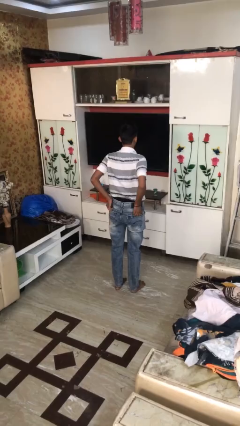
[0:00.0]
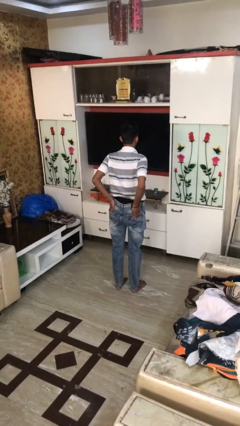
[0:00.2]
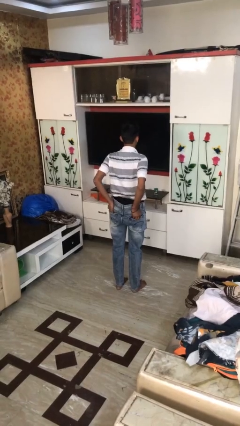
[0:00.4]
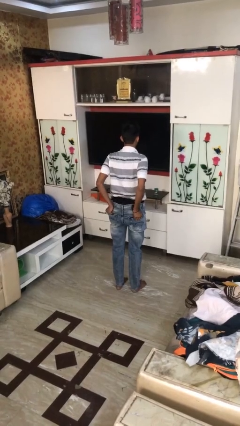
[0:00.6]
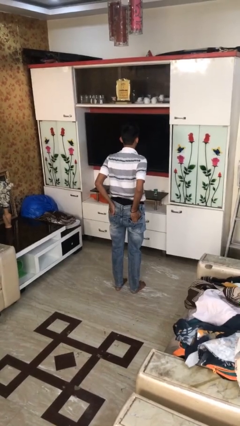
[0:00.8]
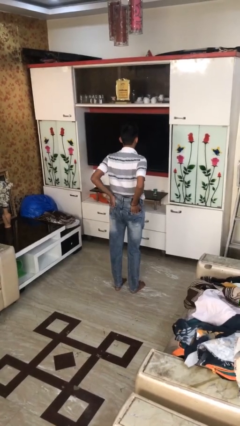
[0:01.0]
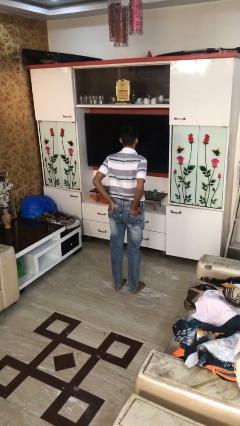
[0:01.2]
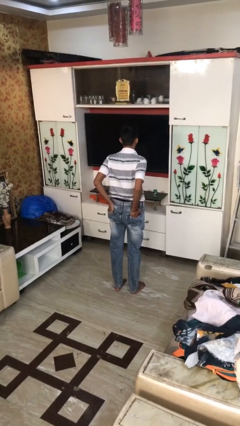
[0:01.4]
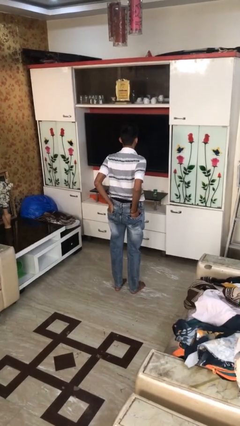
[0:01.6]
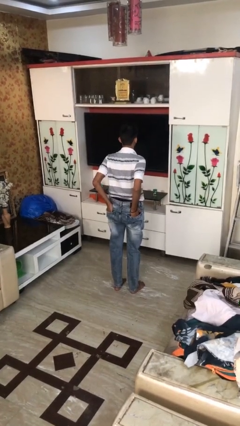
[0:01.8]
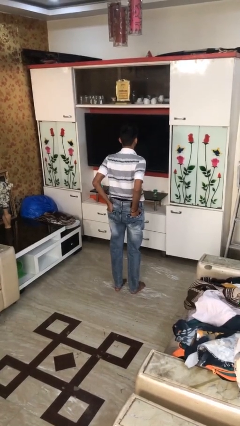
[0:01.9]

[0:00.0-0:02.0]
person puts hands in back pockets

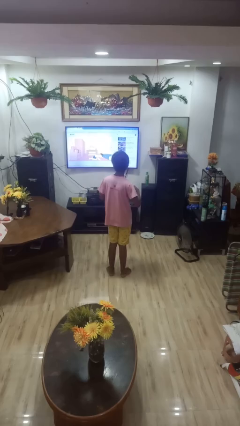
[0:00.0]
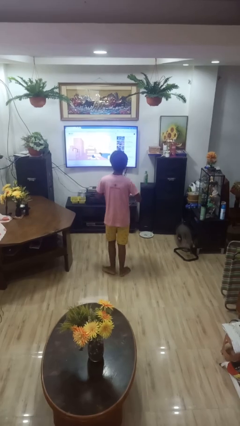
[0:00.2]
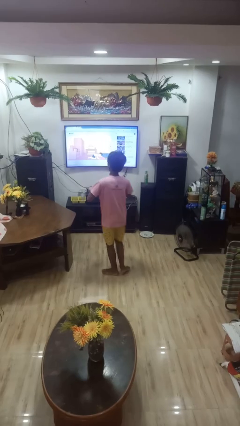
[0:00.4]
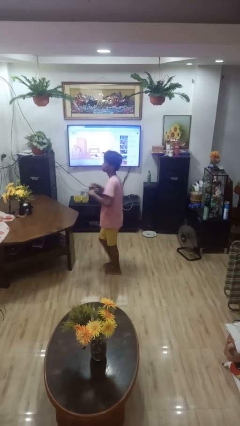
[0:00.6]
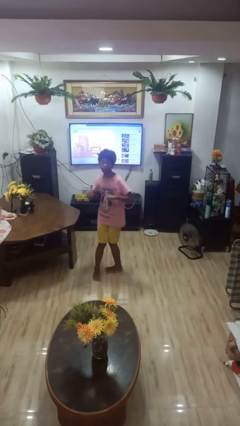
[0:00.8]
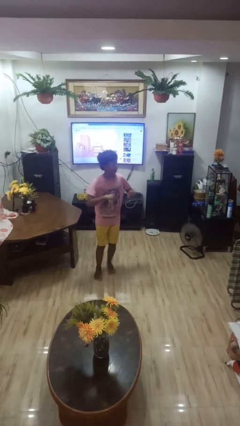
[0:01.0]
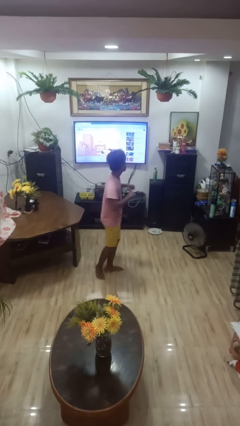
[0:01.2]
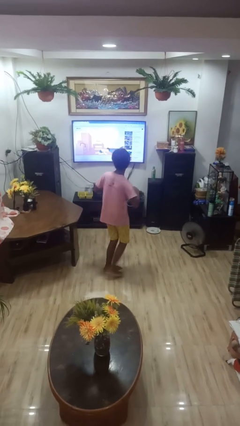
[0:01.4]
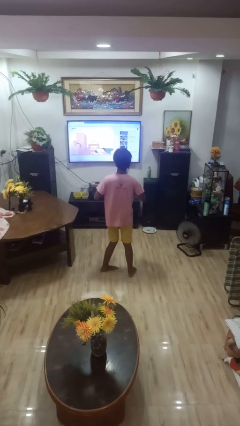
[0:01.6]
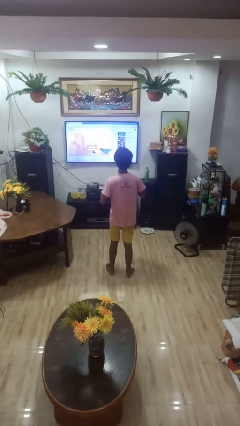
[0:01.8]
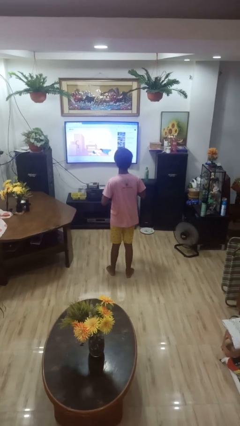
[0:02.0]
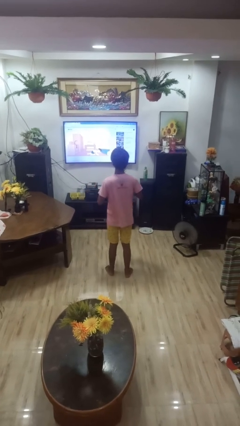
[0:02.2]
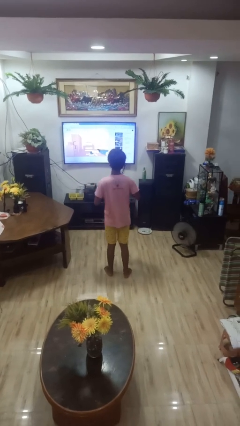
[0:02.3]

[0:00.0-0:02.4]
person twirls

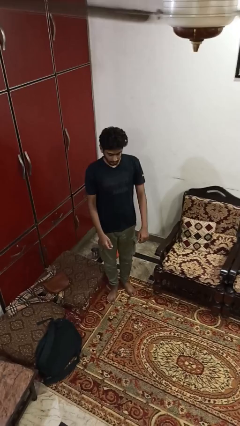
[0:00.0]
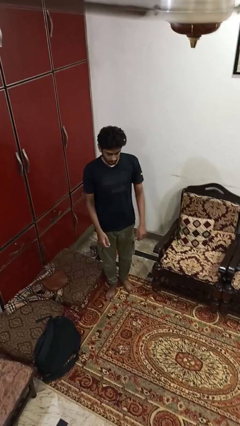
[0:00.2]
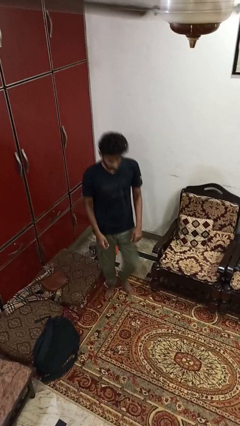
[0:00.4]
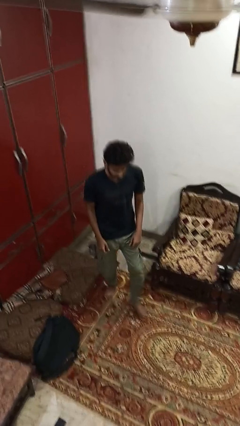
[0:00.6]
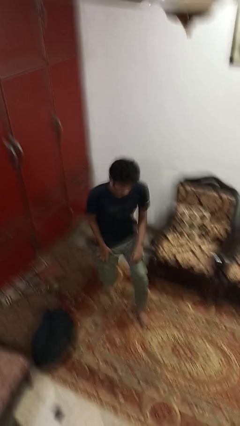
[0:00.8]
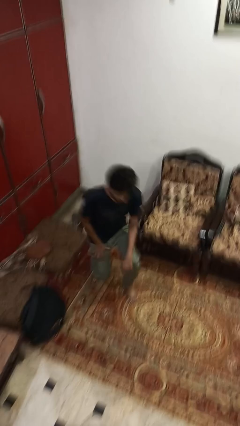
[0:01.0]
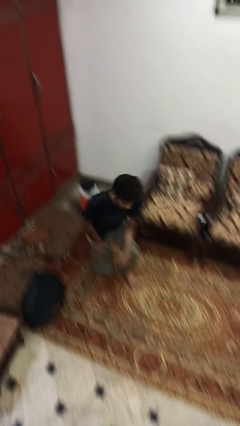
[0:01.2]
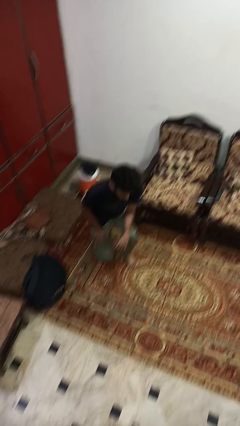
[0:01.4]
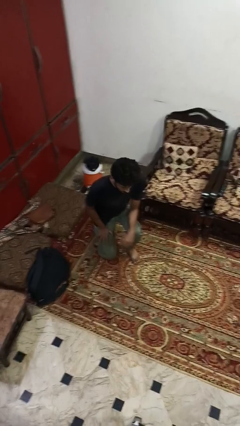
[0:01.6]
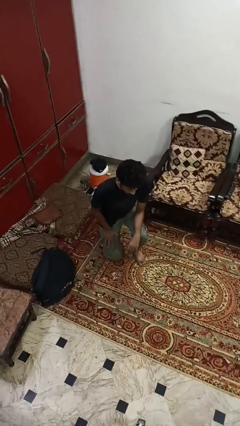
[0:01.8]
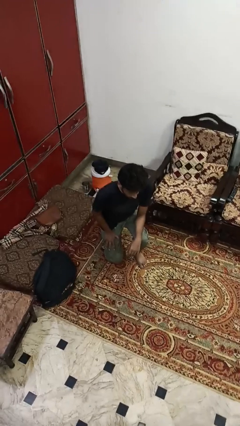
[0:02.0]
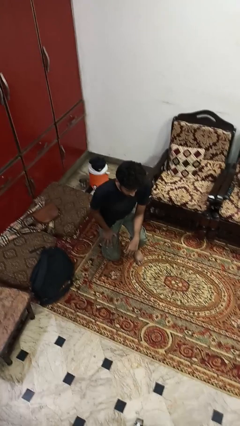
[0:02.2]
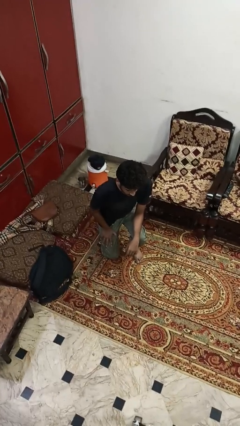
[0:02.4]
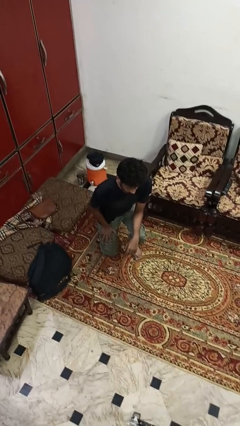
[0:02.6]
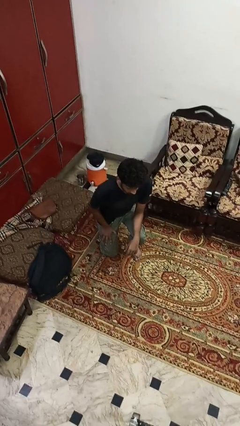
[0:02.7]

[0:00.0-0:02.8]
person kneels

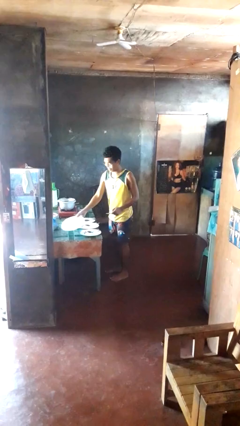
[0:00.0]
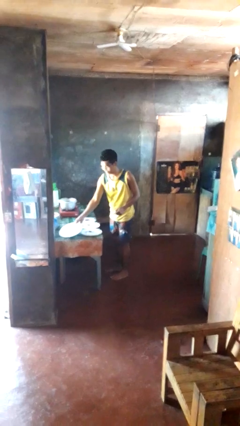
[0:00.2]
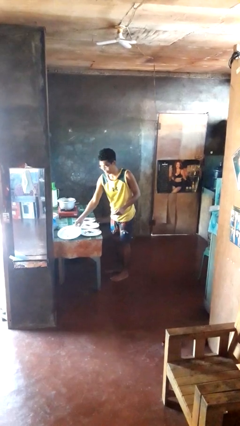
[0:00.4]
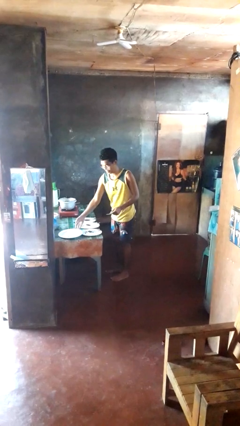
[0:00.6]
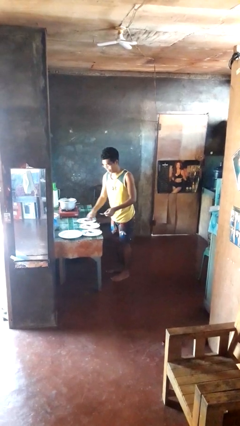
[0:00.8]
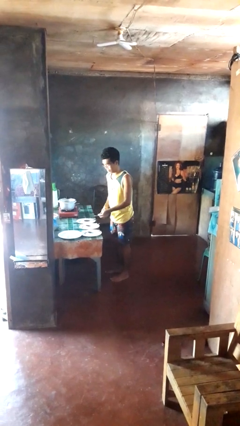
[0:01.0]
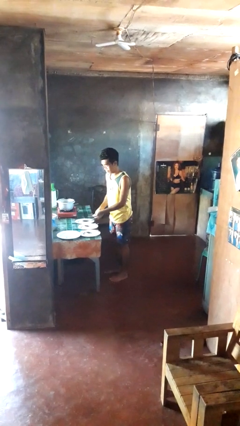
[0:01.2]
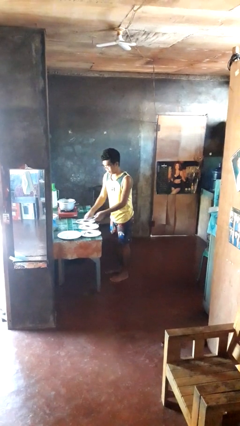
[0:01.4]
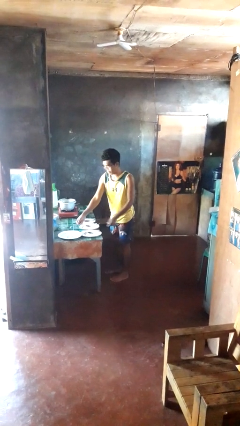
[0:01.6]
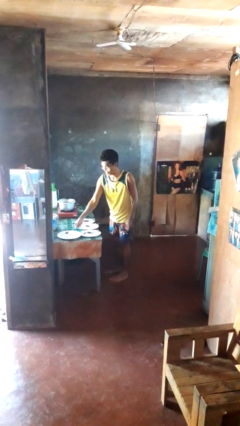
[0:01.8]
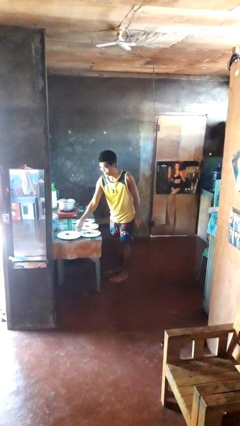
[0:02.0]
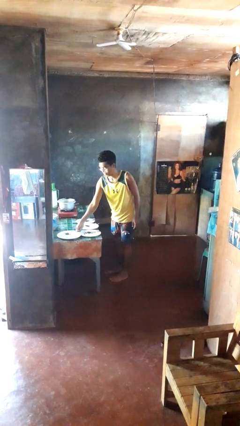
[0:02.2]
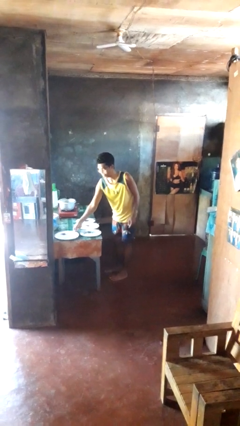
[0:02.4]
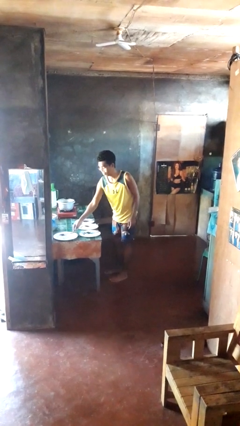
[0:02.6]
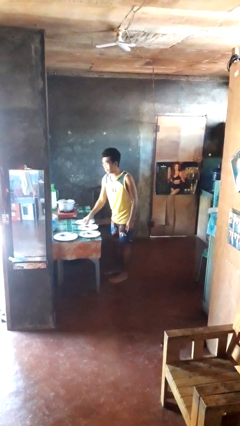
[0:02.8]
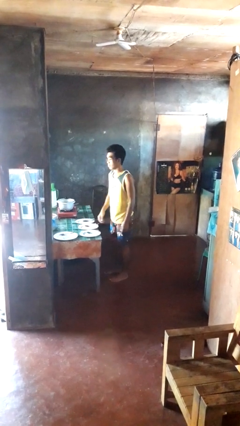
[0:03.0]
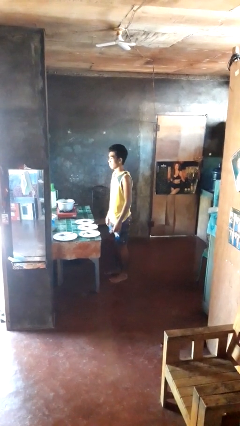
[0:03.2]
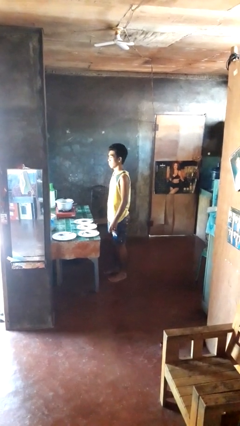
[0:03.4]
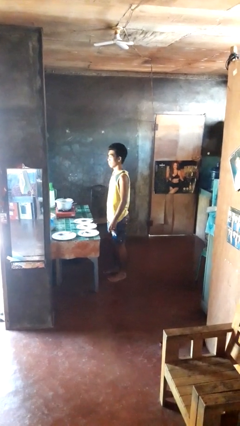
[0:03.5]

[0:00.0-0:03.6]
person sets table

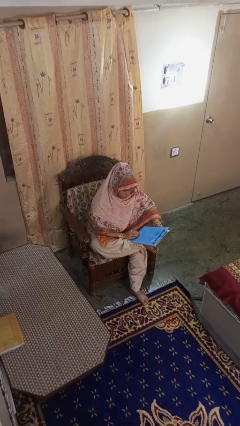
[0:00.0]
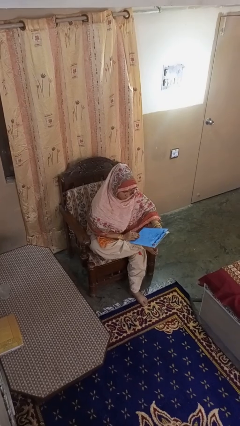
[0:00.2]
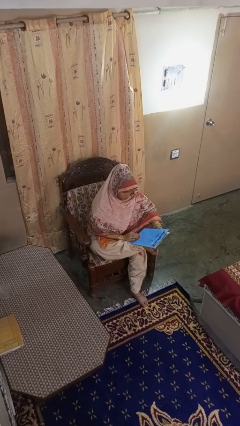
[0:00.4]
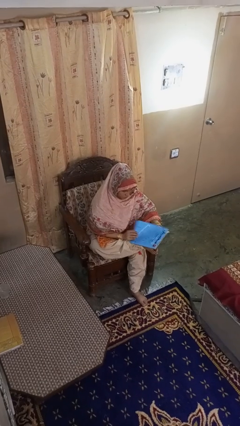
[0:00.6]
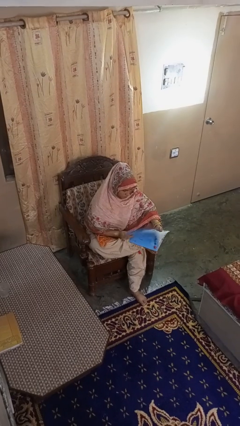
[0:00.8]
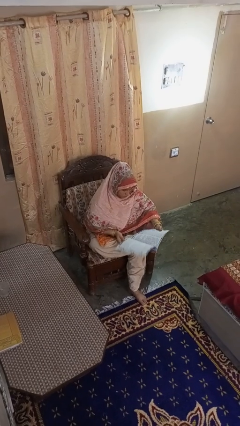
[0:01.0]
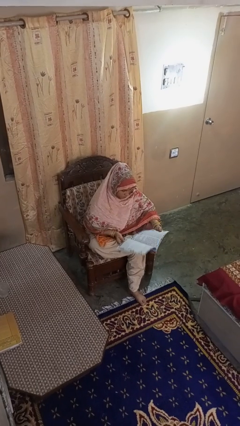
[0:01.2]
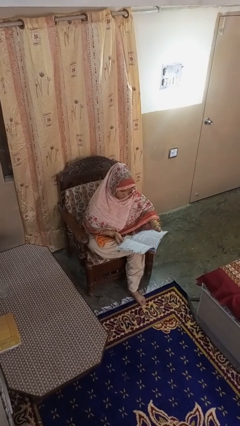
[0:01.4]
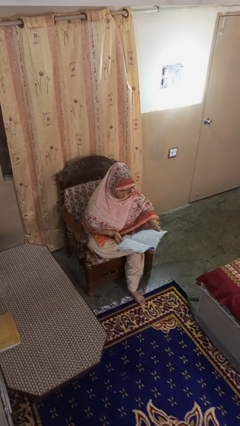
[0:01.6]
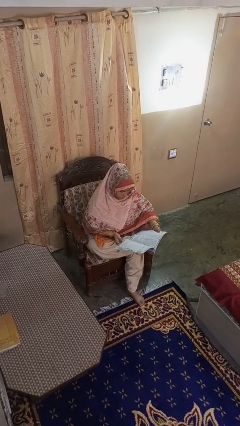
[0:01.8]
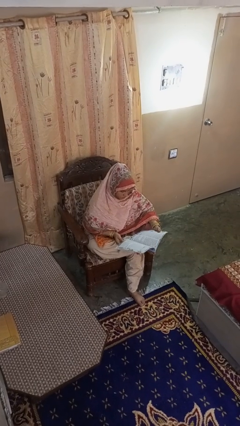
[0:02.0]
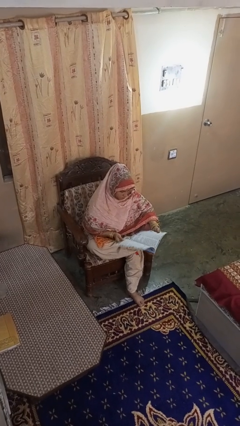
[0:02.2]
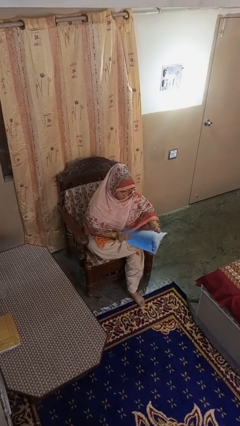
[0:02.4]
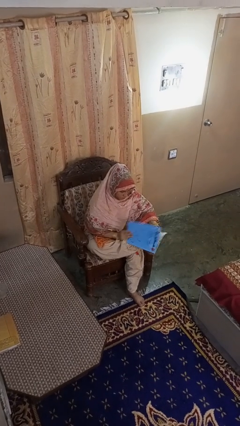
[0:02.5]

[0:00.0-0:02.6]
person reads magazine

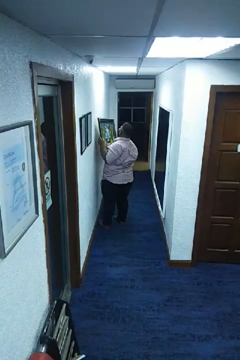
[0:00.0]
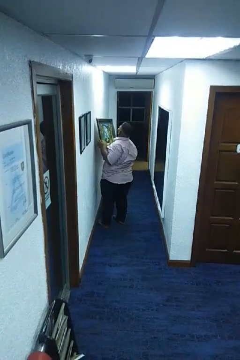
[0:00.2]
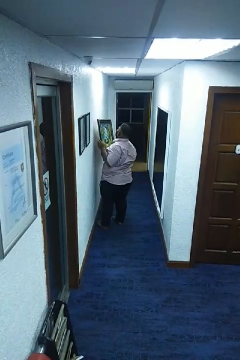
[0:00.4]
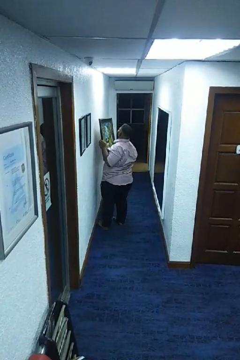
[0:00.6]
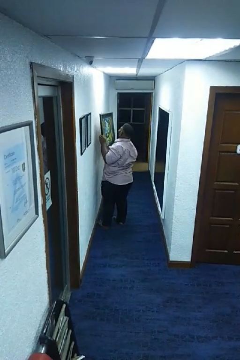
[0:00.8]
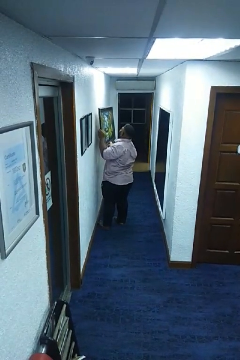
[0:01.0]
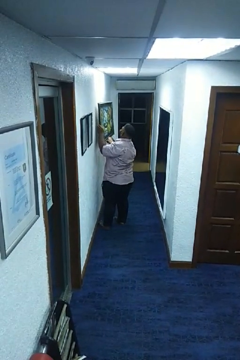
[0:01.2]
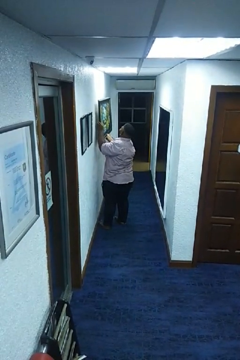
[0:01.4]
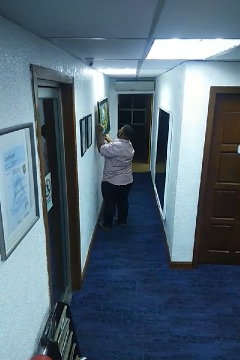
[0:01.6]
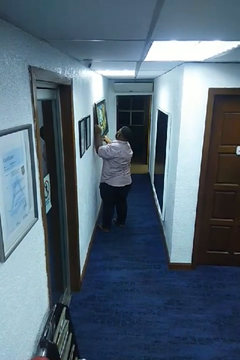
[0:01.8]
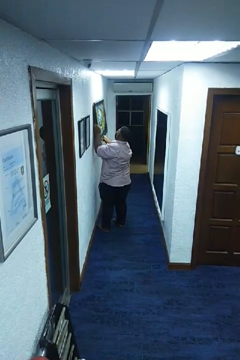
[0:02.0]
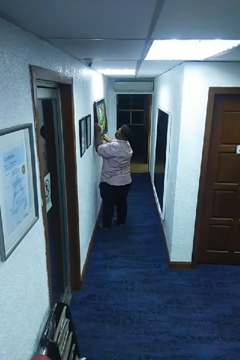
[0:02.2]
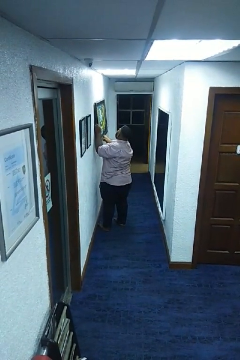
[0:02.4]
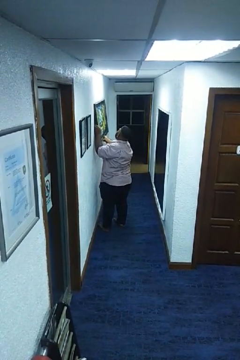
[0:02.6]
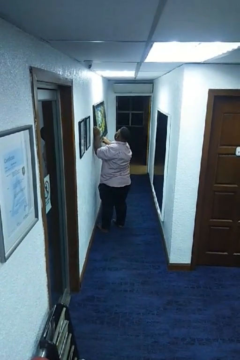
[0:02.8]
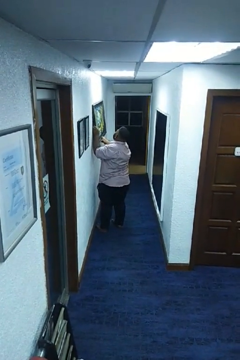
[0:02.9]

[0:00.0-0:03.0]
person puts up picture frame

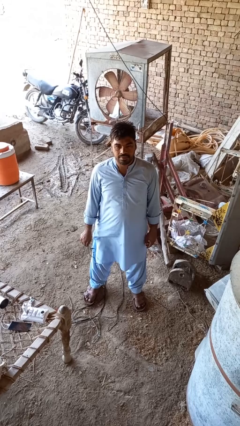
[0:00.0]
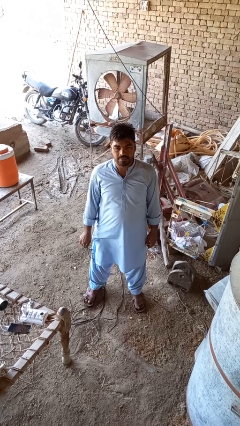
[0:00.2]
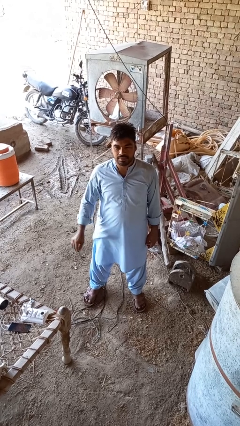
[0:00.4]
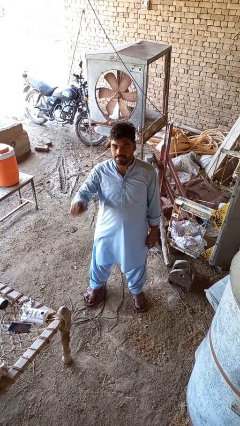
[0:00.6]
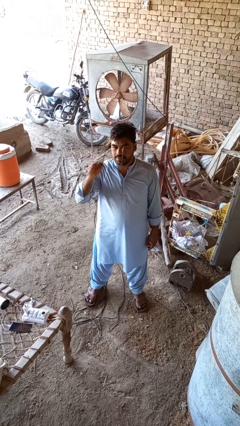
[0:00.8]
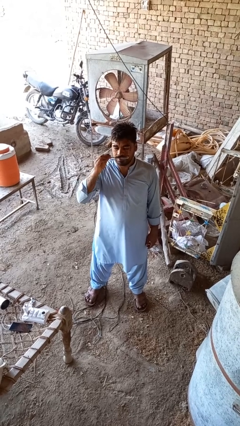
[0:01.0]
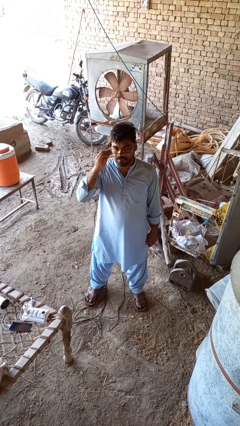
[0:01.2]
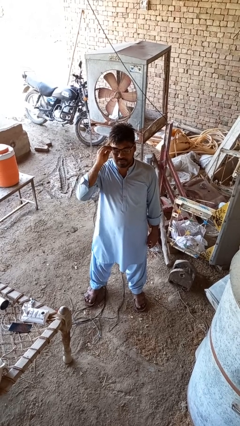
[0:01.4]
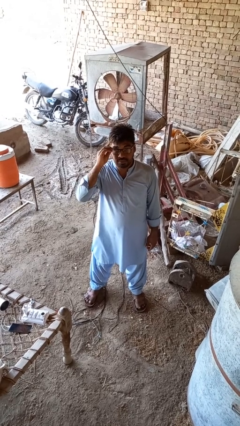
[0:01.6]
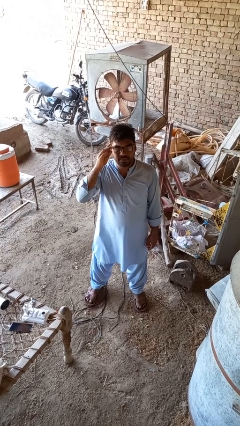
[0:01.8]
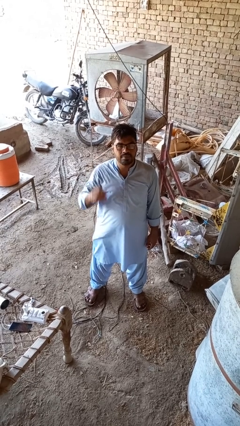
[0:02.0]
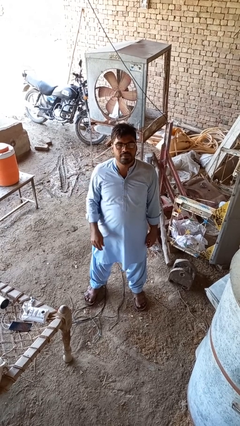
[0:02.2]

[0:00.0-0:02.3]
person puts on glasses
